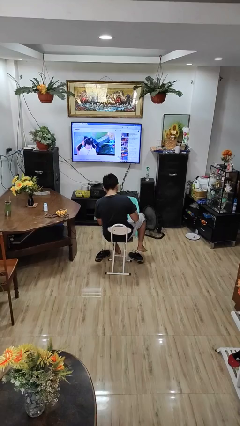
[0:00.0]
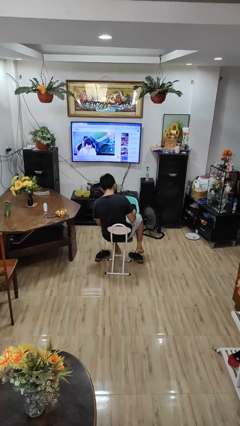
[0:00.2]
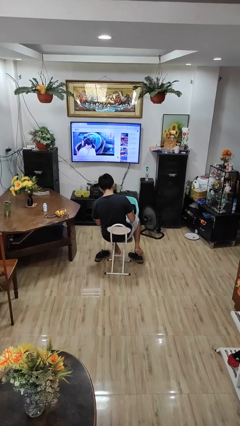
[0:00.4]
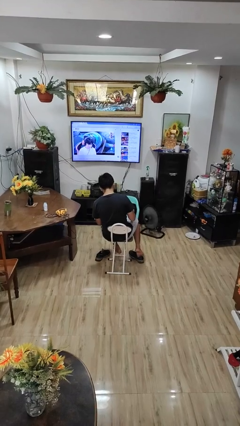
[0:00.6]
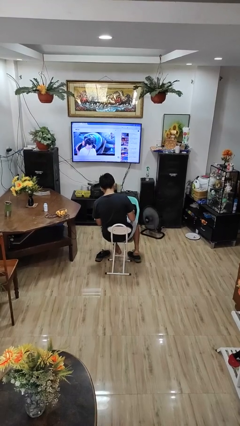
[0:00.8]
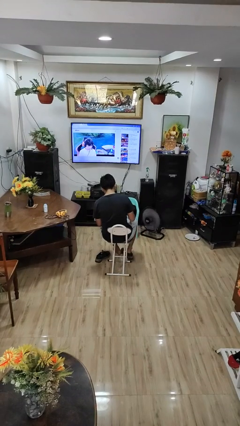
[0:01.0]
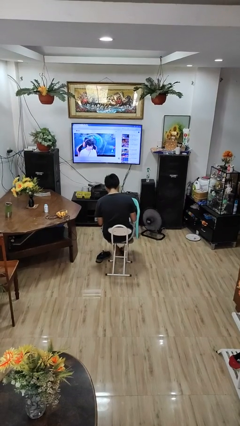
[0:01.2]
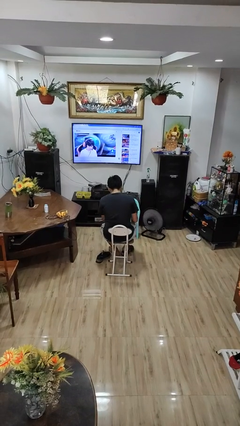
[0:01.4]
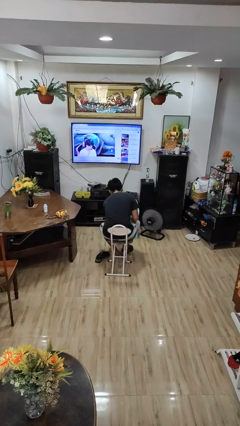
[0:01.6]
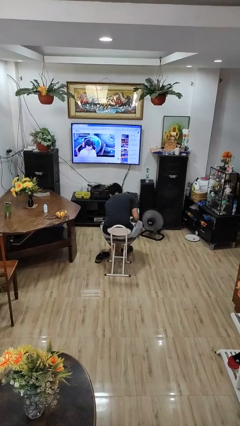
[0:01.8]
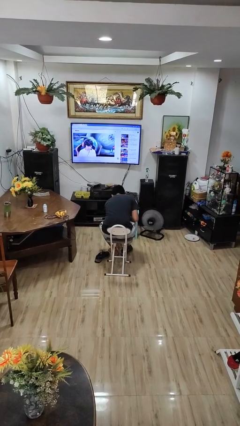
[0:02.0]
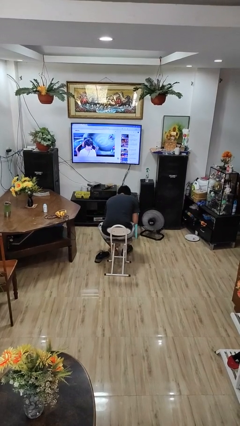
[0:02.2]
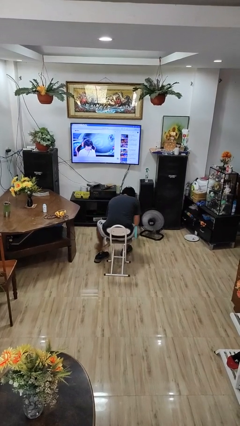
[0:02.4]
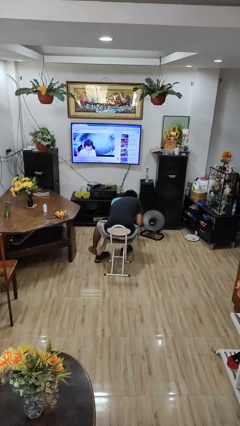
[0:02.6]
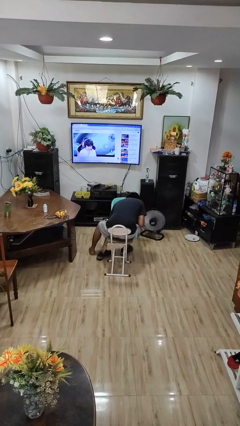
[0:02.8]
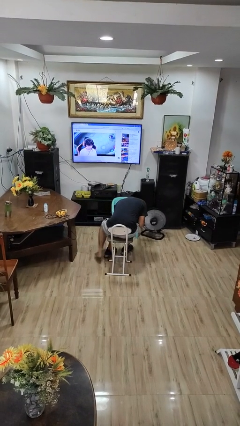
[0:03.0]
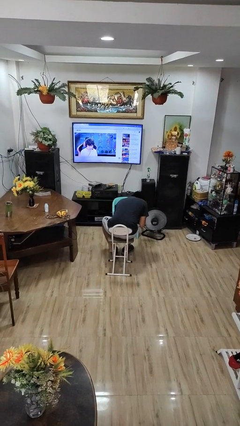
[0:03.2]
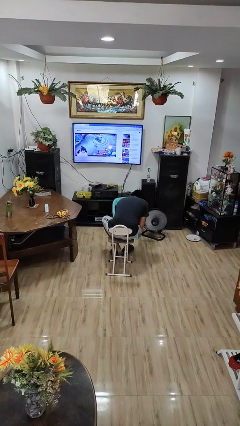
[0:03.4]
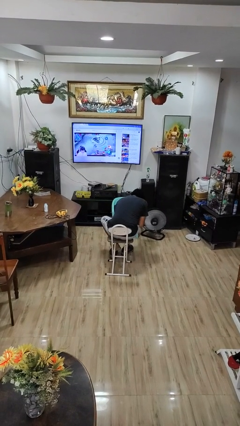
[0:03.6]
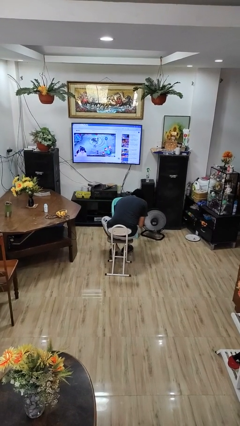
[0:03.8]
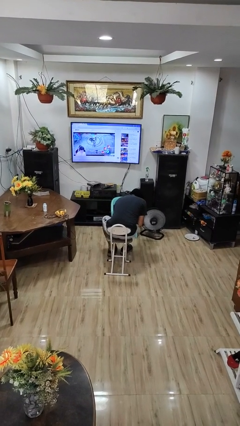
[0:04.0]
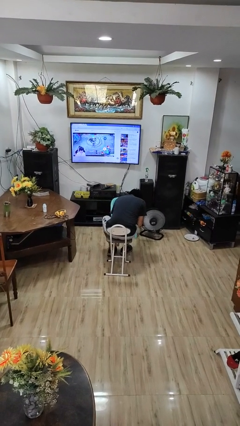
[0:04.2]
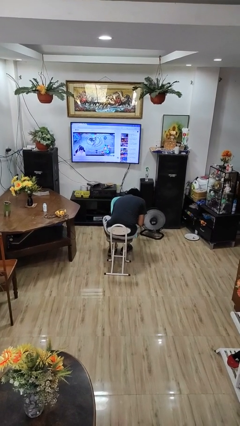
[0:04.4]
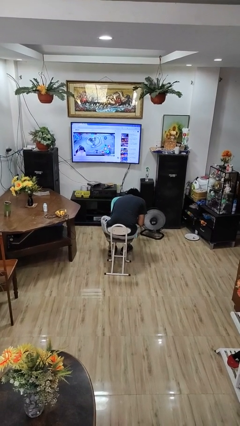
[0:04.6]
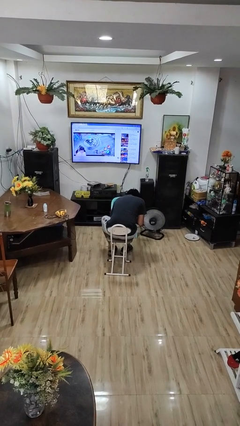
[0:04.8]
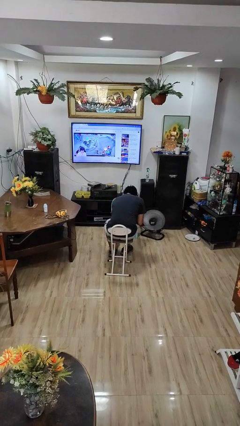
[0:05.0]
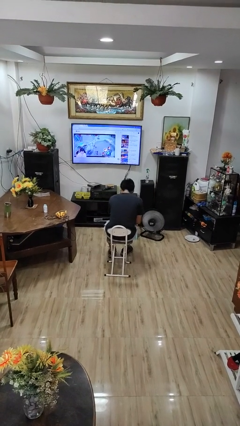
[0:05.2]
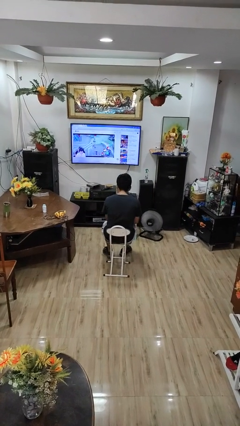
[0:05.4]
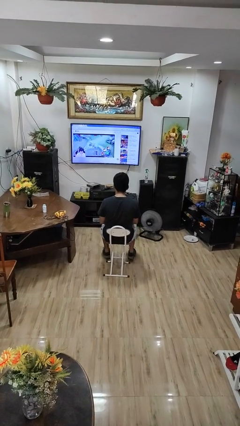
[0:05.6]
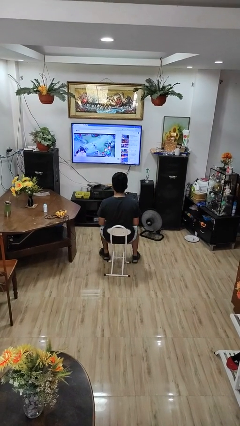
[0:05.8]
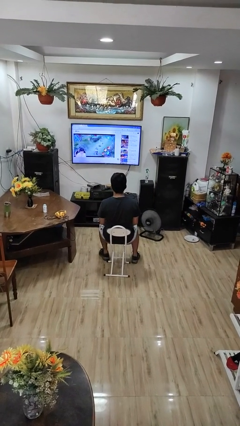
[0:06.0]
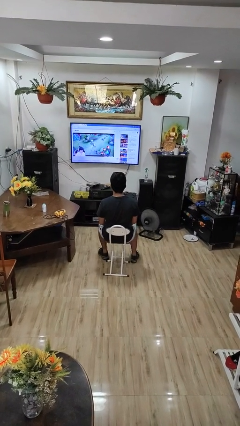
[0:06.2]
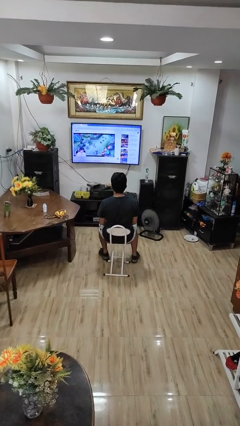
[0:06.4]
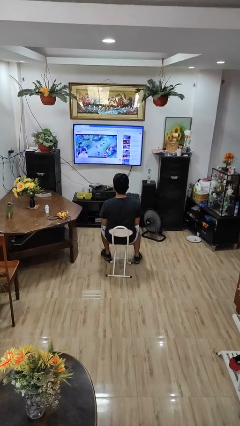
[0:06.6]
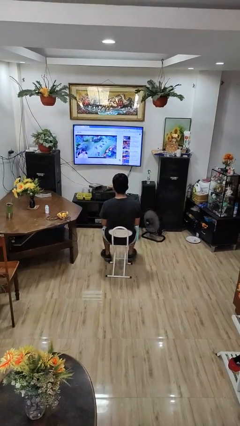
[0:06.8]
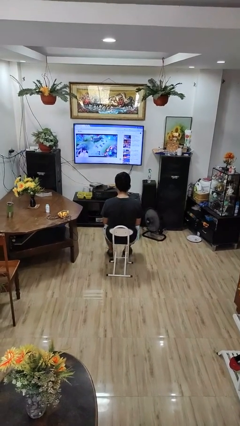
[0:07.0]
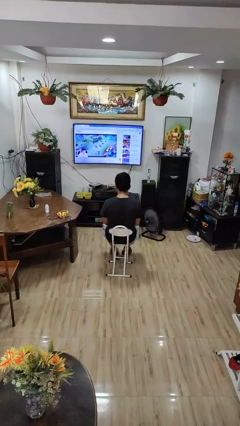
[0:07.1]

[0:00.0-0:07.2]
person puts on shoes

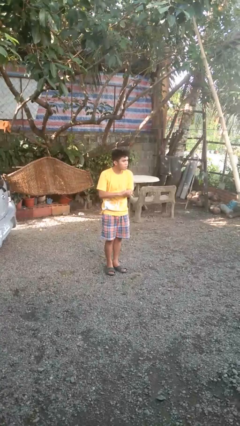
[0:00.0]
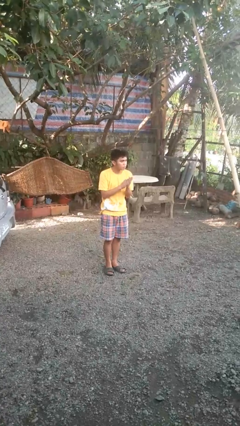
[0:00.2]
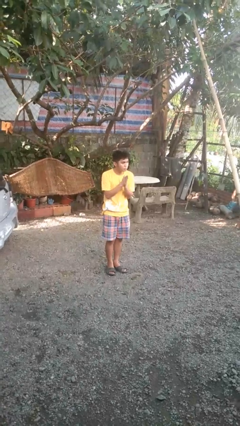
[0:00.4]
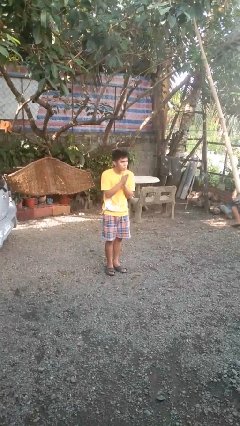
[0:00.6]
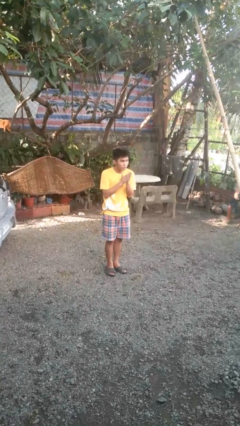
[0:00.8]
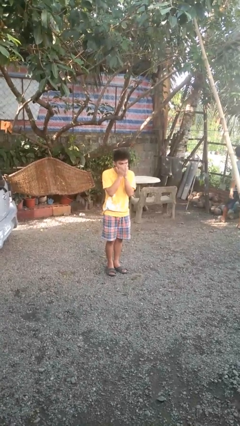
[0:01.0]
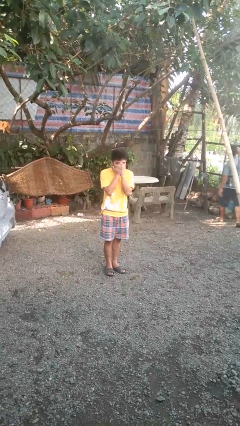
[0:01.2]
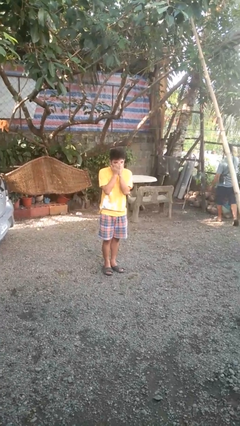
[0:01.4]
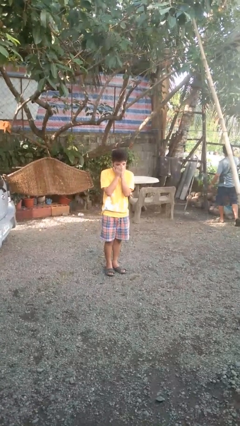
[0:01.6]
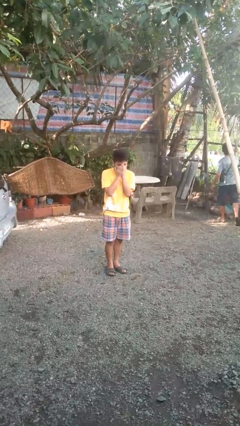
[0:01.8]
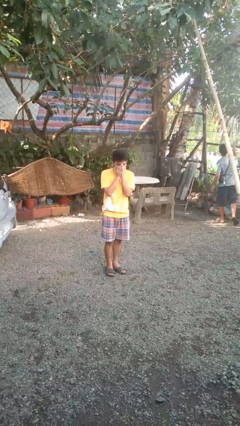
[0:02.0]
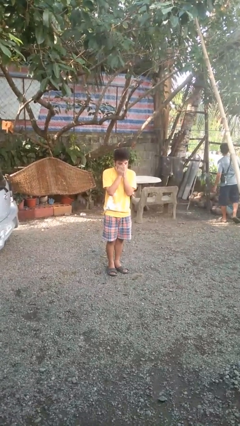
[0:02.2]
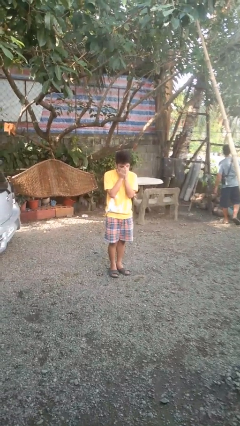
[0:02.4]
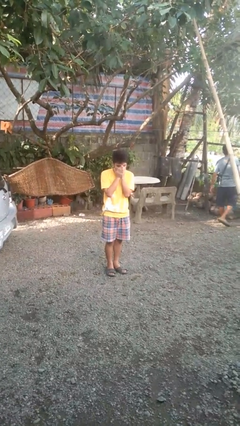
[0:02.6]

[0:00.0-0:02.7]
person blows into hands

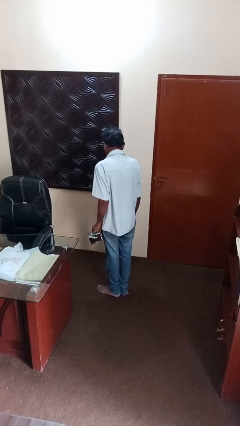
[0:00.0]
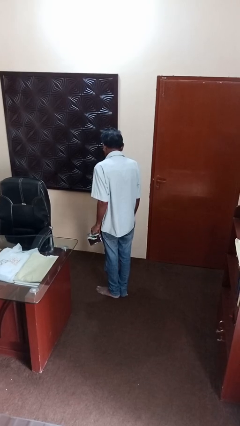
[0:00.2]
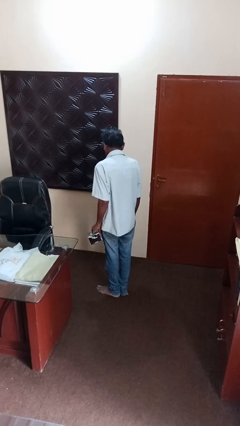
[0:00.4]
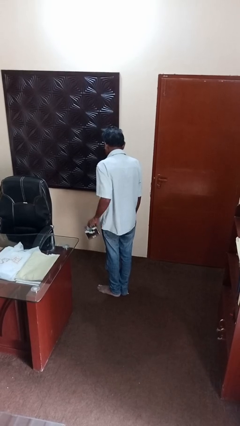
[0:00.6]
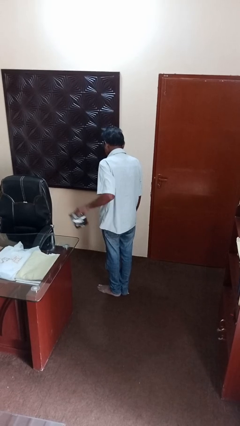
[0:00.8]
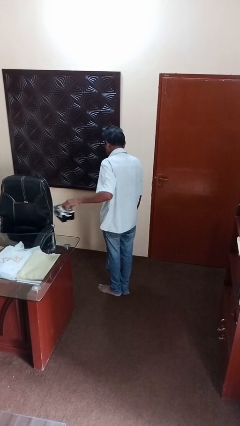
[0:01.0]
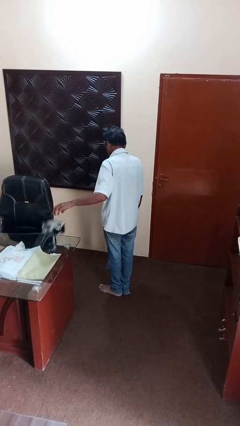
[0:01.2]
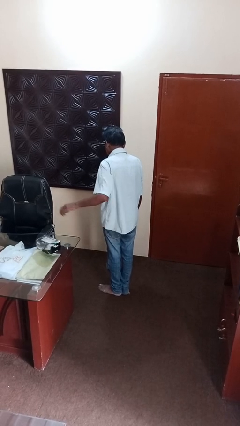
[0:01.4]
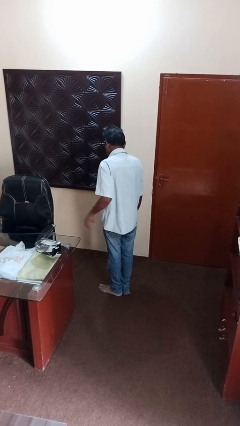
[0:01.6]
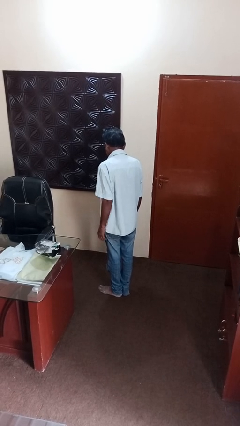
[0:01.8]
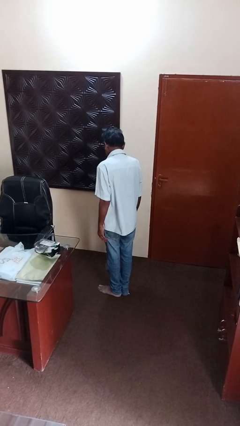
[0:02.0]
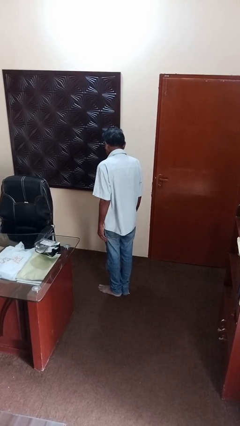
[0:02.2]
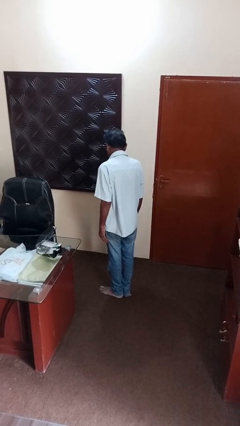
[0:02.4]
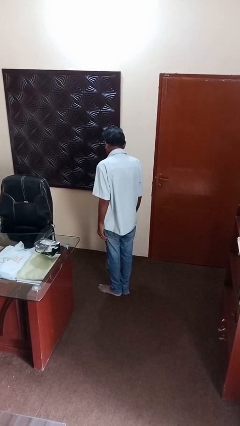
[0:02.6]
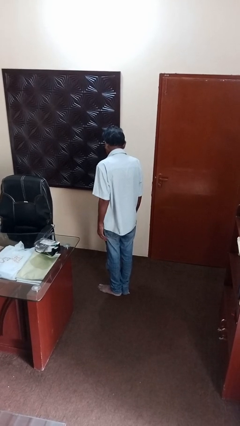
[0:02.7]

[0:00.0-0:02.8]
person throws object on table

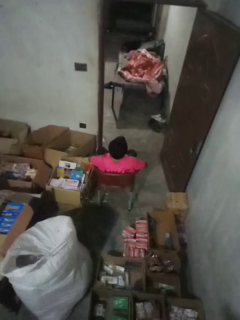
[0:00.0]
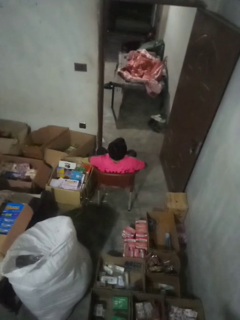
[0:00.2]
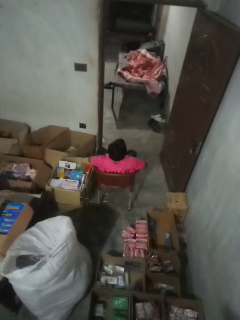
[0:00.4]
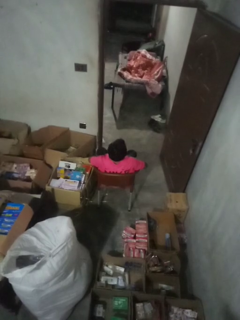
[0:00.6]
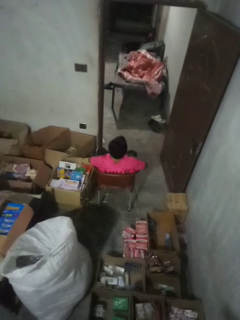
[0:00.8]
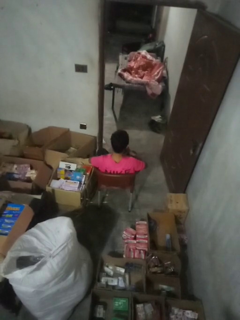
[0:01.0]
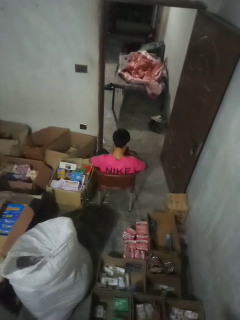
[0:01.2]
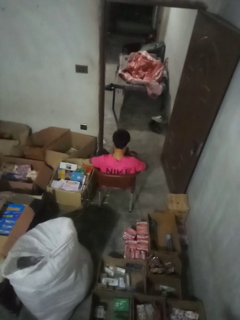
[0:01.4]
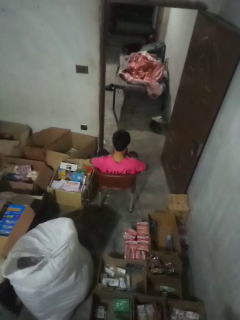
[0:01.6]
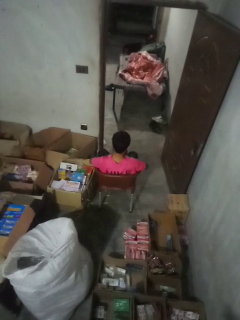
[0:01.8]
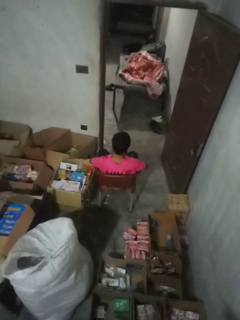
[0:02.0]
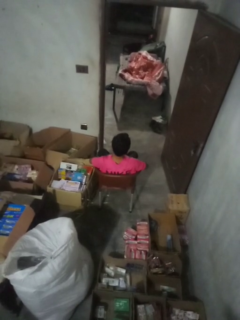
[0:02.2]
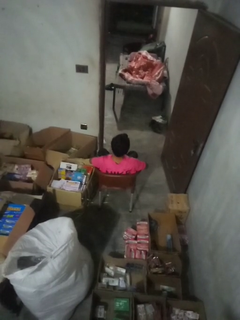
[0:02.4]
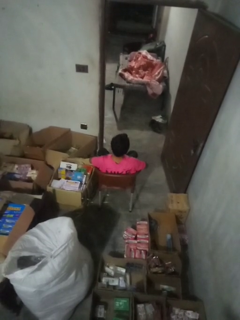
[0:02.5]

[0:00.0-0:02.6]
person sneezes into hand

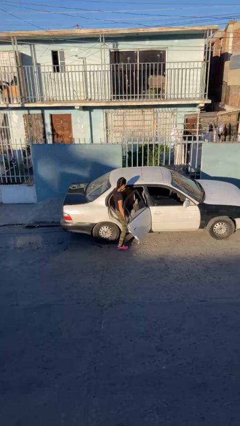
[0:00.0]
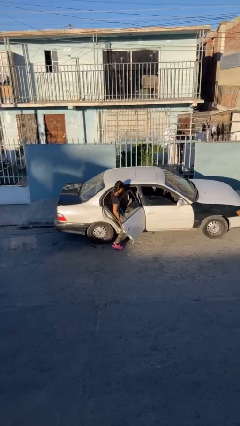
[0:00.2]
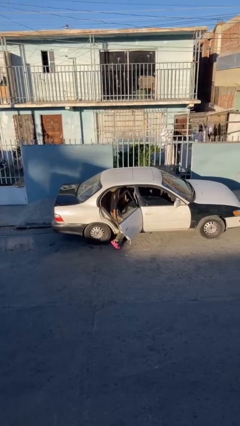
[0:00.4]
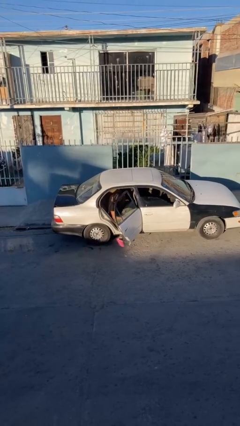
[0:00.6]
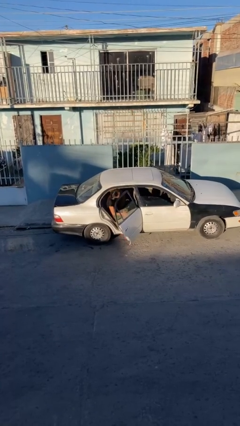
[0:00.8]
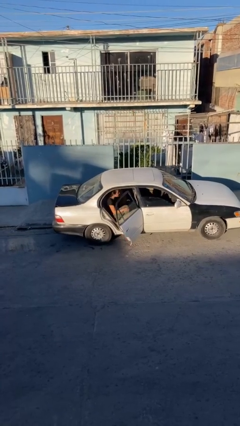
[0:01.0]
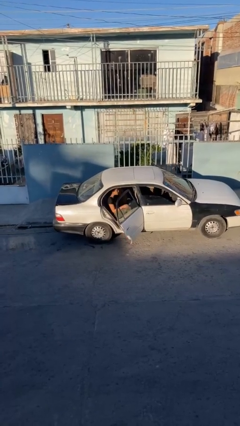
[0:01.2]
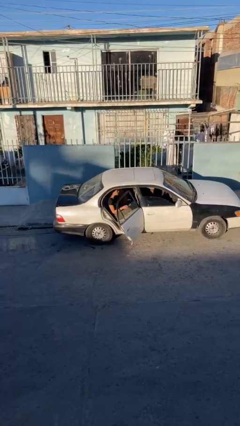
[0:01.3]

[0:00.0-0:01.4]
person enters car

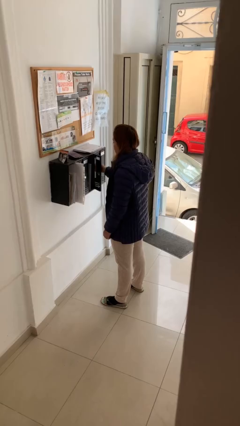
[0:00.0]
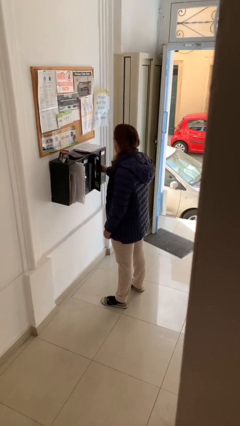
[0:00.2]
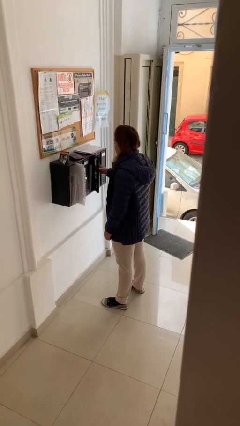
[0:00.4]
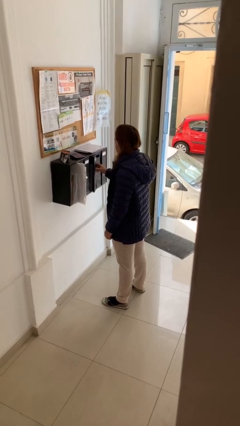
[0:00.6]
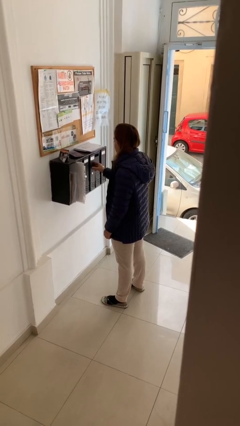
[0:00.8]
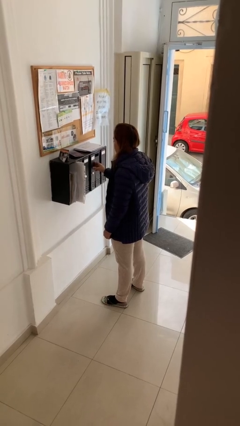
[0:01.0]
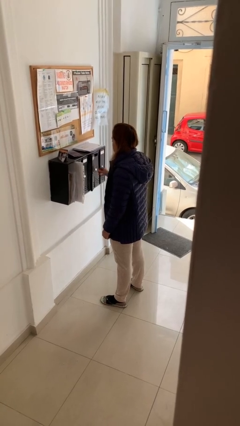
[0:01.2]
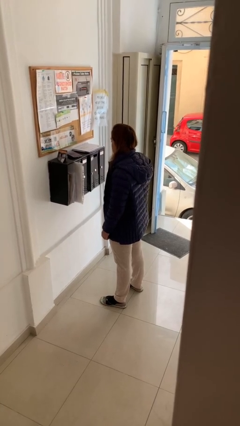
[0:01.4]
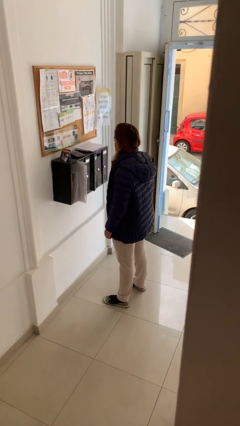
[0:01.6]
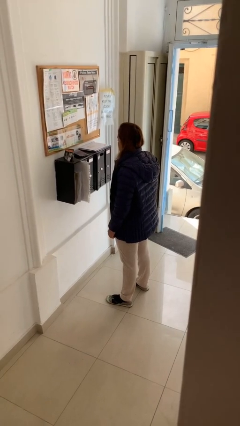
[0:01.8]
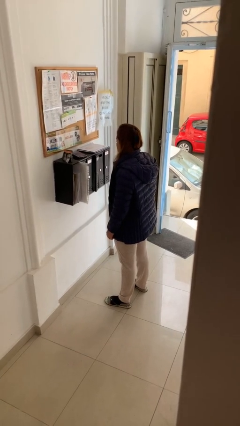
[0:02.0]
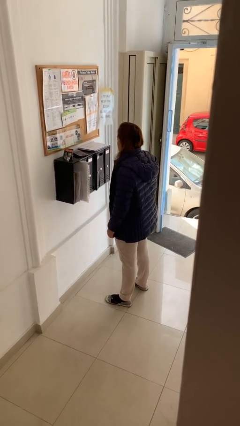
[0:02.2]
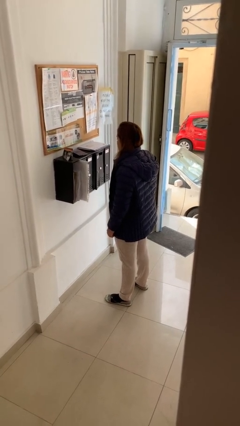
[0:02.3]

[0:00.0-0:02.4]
person closes mailbox
